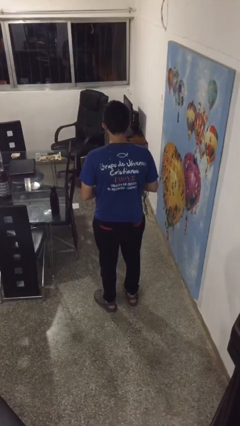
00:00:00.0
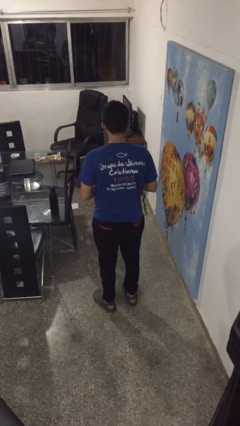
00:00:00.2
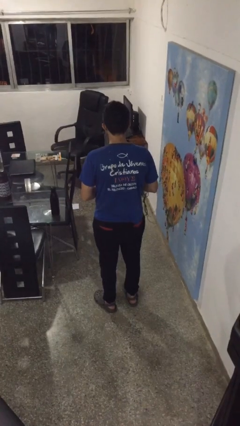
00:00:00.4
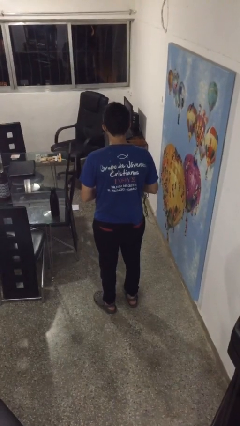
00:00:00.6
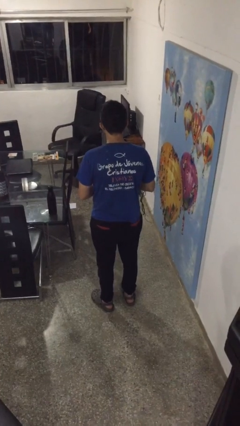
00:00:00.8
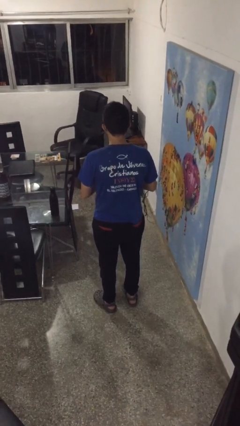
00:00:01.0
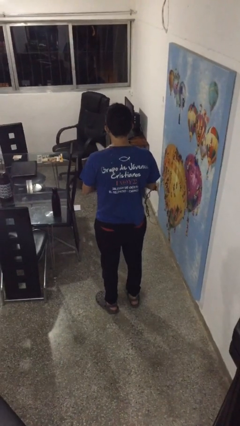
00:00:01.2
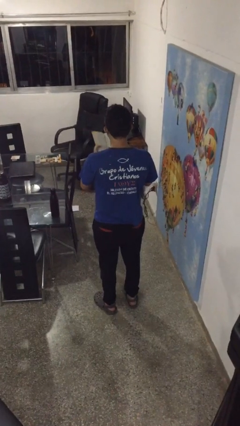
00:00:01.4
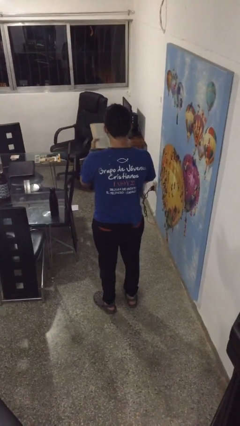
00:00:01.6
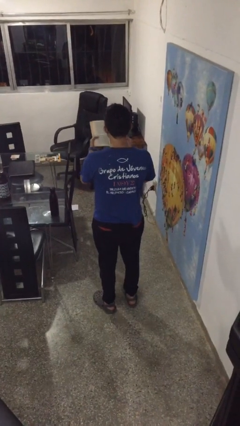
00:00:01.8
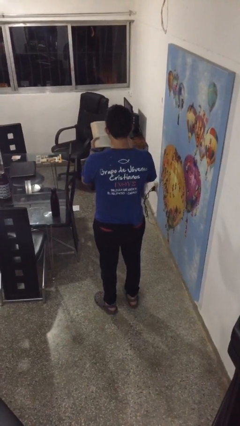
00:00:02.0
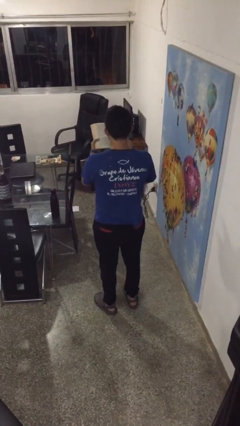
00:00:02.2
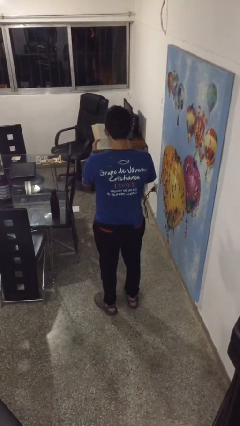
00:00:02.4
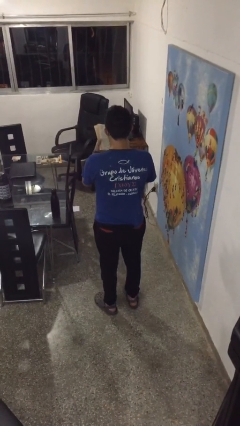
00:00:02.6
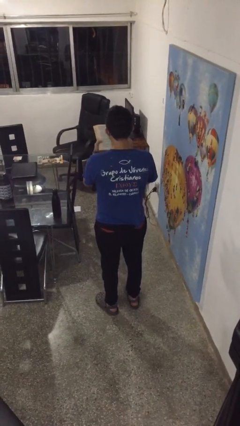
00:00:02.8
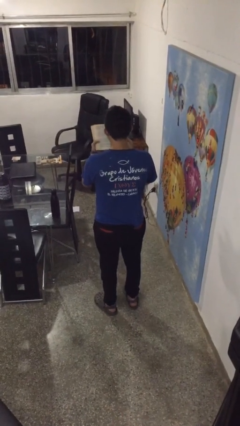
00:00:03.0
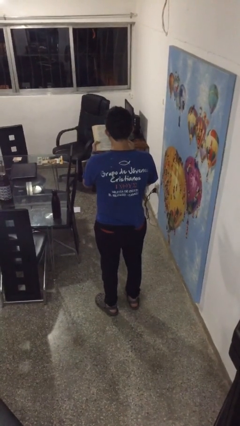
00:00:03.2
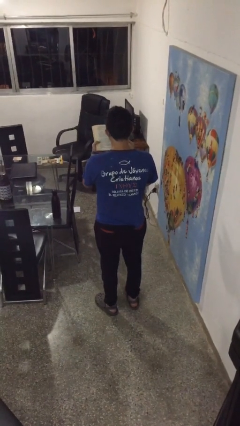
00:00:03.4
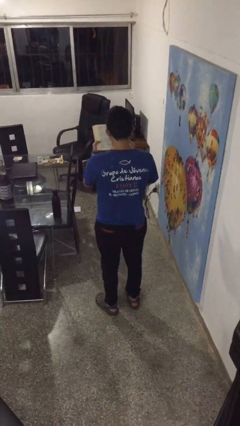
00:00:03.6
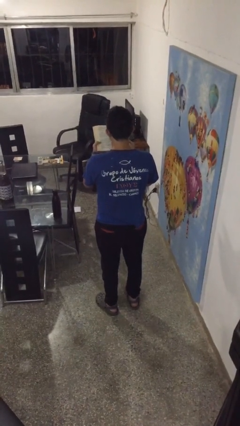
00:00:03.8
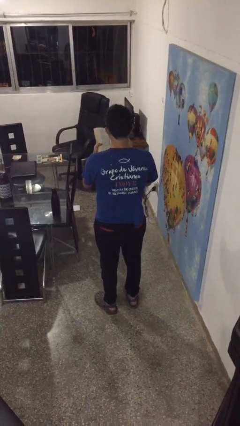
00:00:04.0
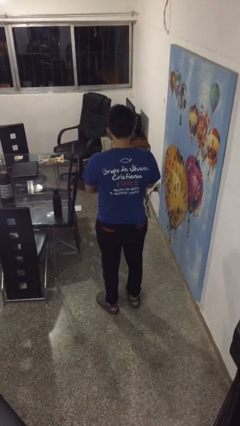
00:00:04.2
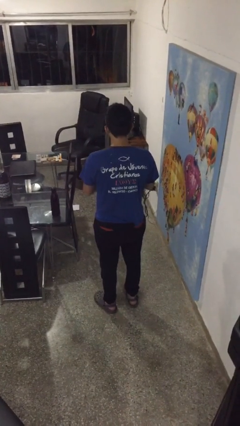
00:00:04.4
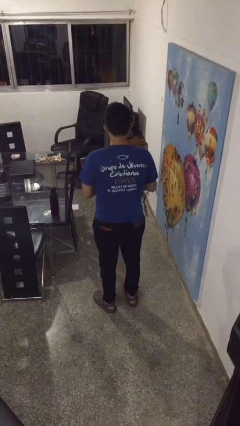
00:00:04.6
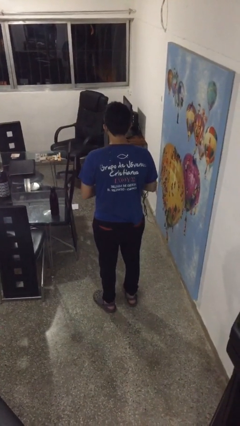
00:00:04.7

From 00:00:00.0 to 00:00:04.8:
person reads book

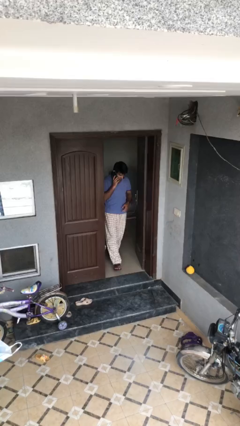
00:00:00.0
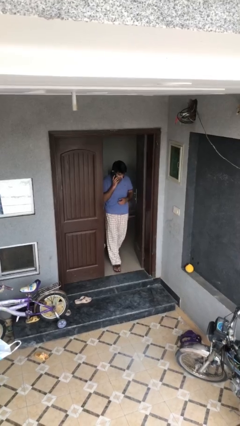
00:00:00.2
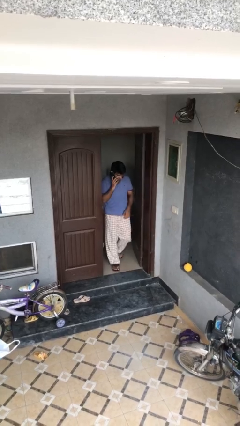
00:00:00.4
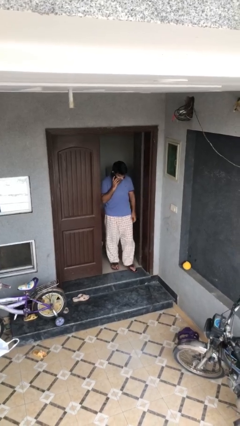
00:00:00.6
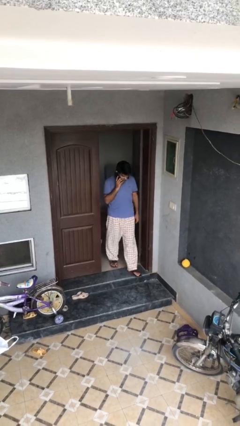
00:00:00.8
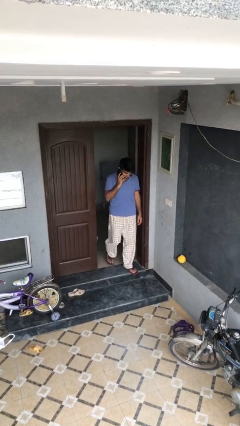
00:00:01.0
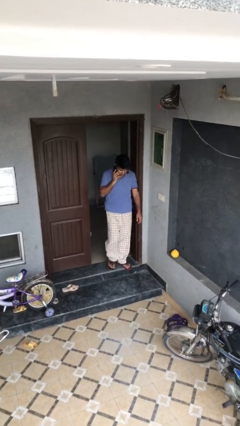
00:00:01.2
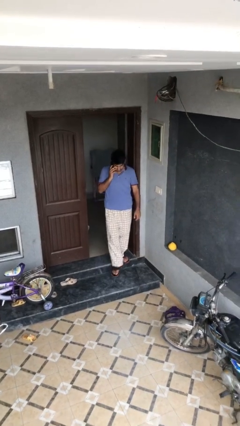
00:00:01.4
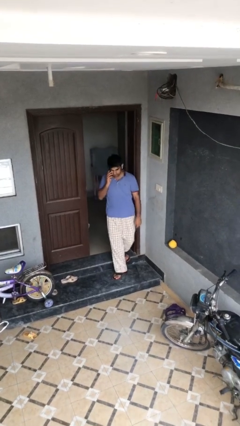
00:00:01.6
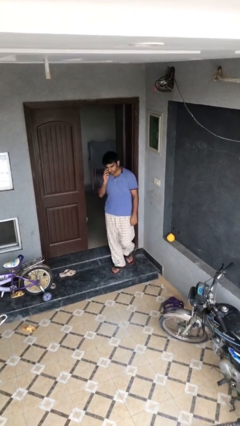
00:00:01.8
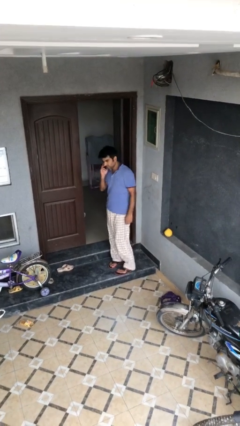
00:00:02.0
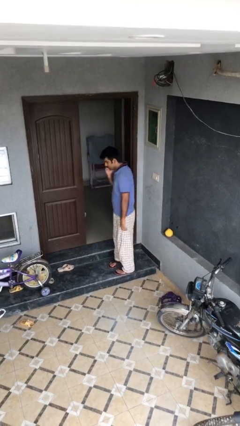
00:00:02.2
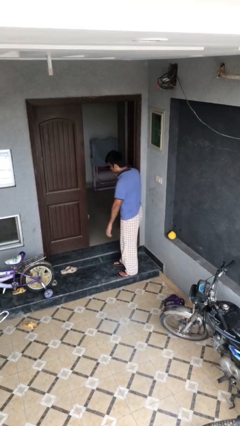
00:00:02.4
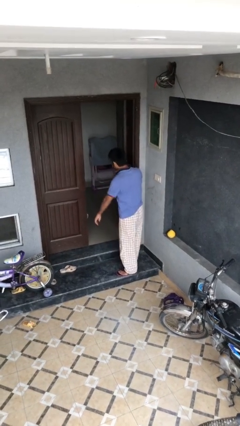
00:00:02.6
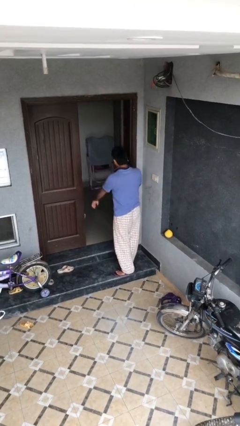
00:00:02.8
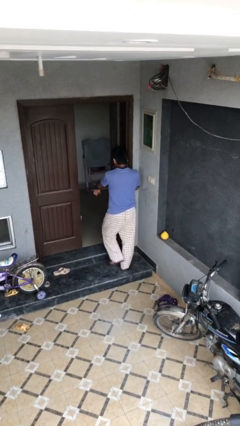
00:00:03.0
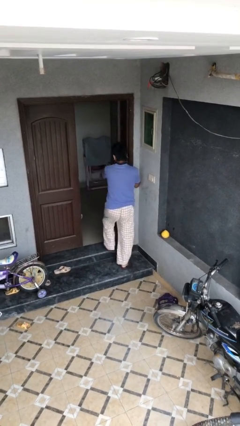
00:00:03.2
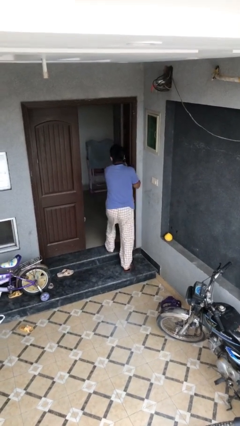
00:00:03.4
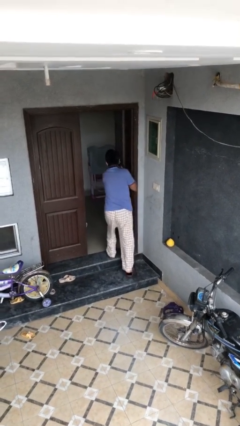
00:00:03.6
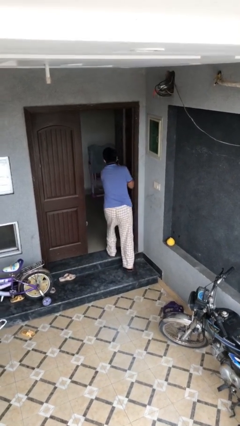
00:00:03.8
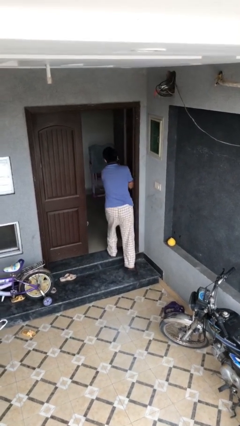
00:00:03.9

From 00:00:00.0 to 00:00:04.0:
person enters scene through structure

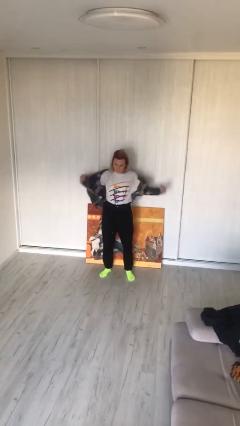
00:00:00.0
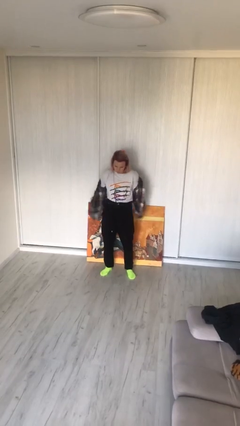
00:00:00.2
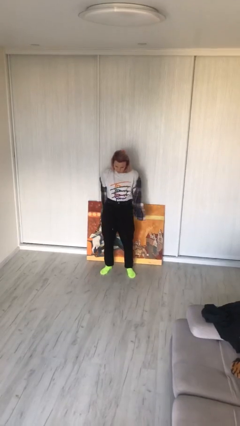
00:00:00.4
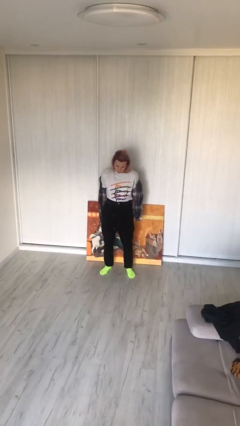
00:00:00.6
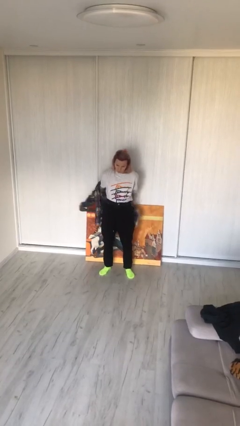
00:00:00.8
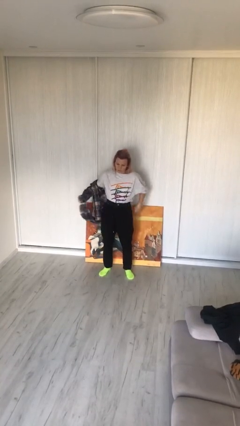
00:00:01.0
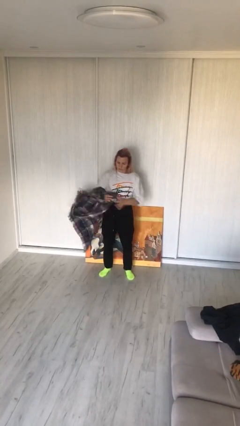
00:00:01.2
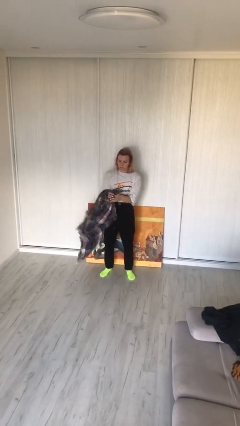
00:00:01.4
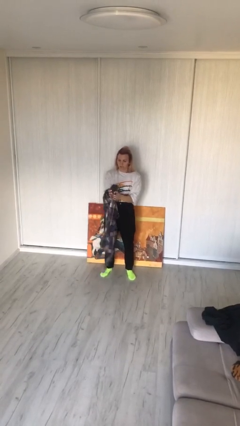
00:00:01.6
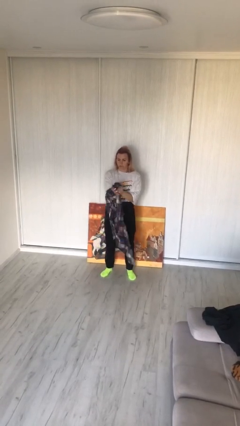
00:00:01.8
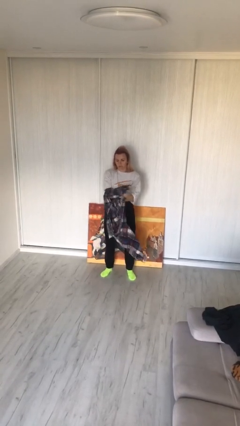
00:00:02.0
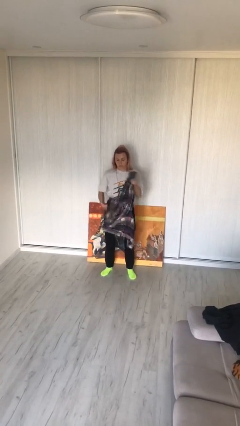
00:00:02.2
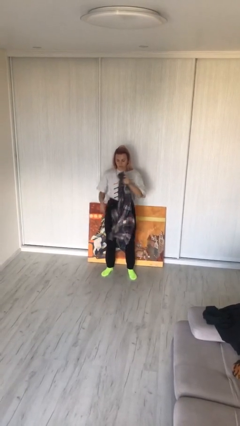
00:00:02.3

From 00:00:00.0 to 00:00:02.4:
person takes off shirt

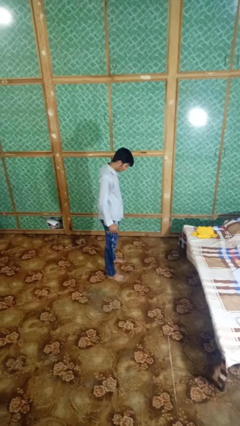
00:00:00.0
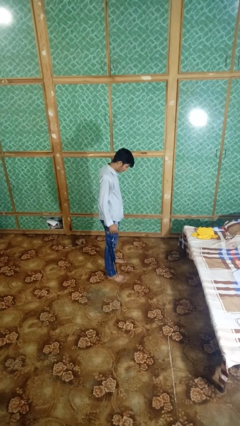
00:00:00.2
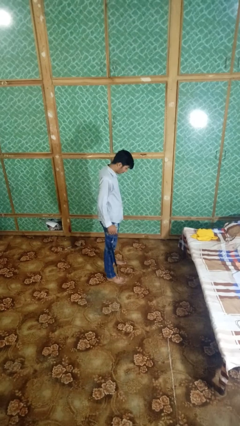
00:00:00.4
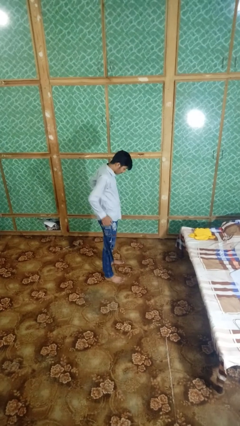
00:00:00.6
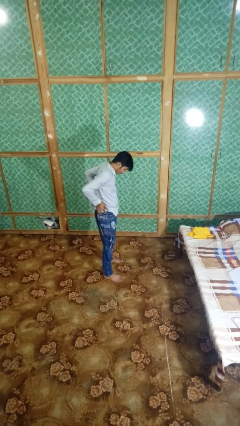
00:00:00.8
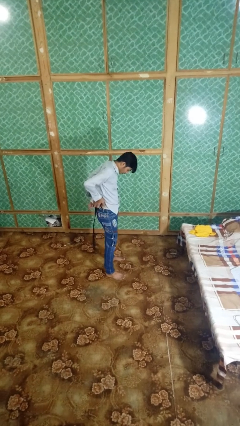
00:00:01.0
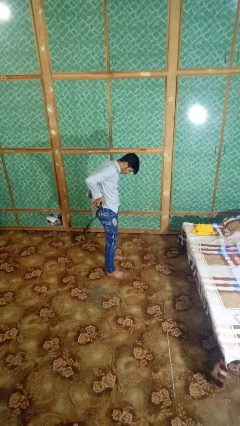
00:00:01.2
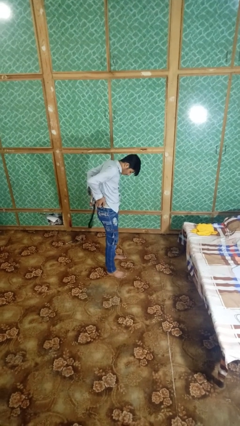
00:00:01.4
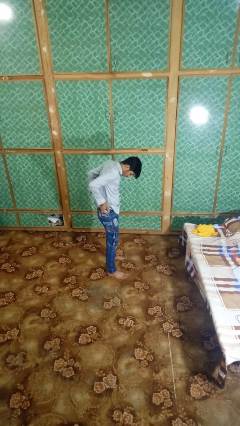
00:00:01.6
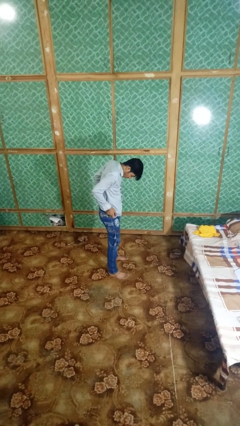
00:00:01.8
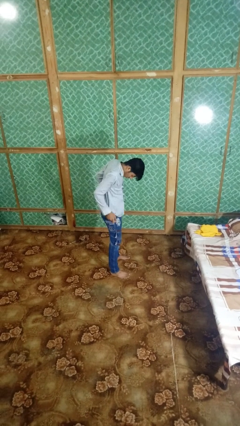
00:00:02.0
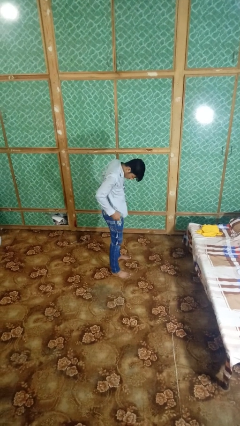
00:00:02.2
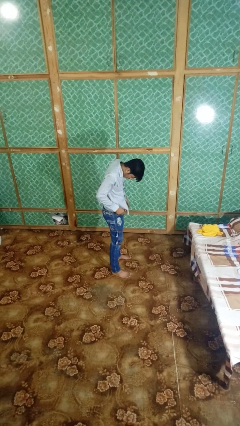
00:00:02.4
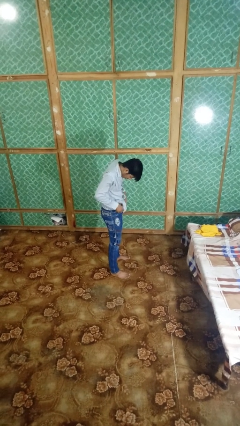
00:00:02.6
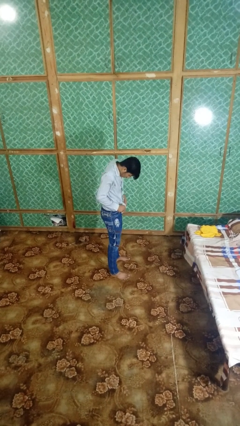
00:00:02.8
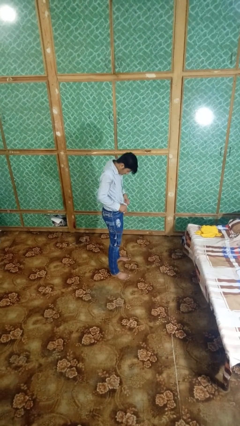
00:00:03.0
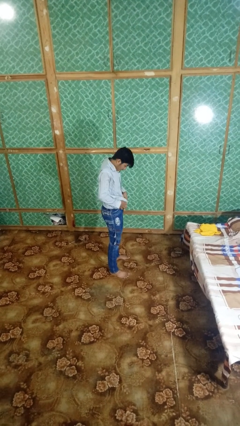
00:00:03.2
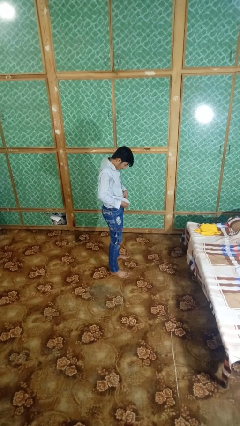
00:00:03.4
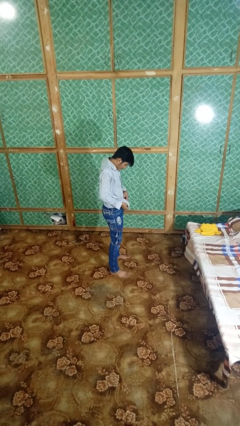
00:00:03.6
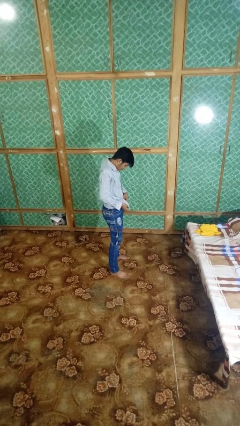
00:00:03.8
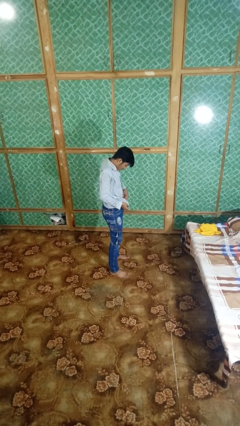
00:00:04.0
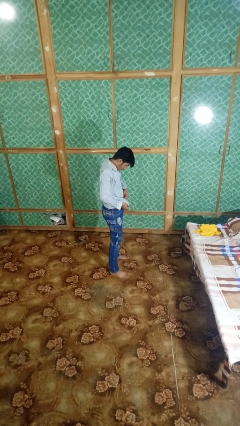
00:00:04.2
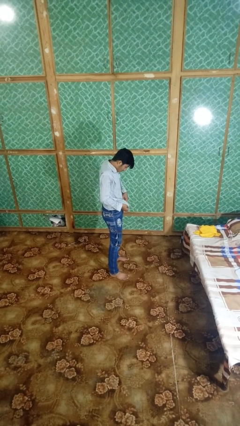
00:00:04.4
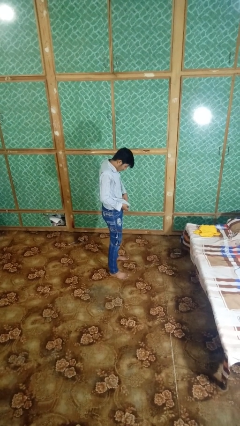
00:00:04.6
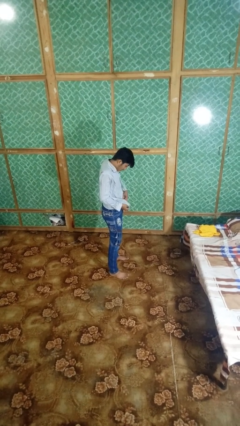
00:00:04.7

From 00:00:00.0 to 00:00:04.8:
person puts on belt

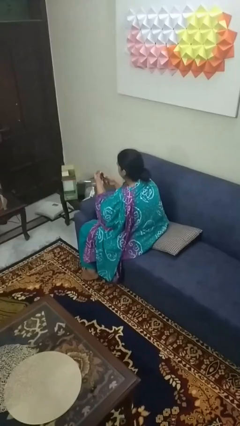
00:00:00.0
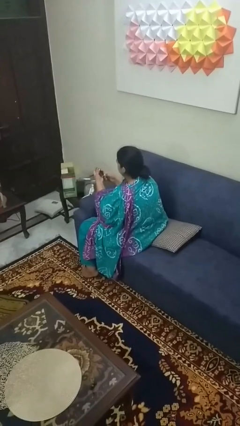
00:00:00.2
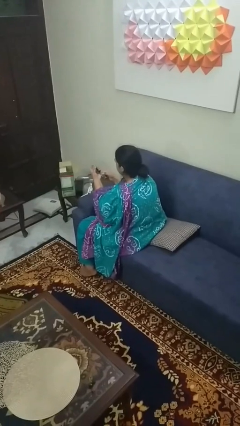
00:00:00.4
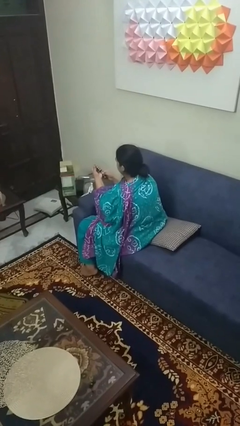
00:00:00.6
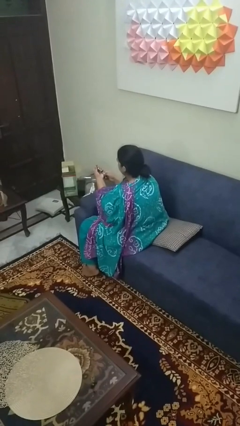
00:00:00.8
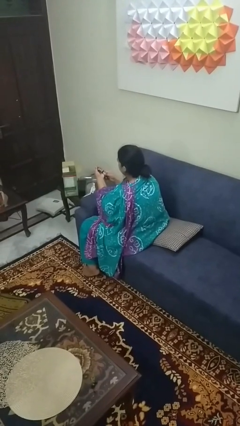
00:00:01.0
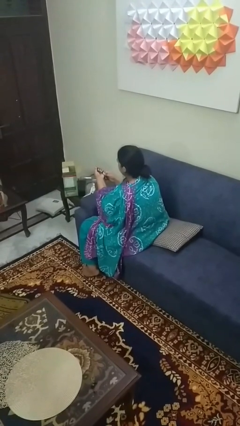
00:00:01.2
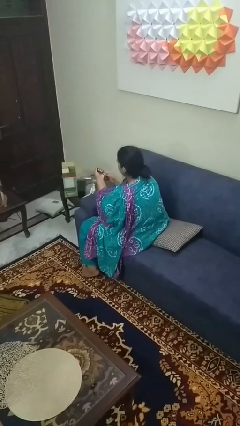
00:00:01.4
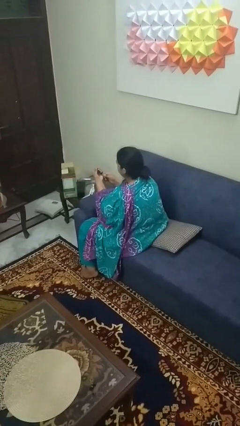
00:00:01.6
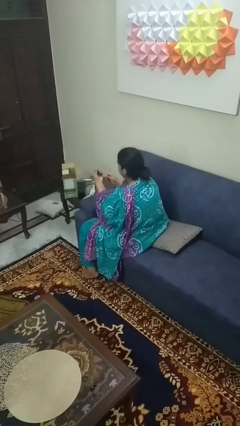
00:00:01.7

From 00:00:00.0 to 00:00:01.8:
person clips fingernails
